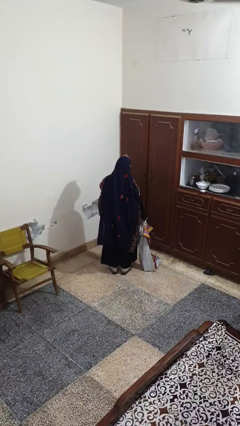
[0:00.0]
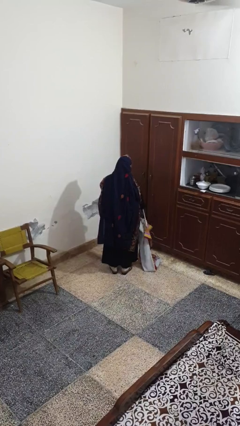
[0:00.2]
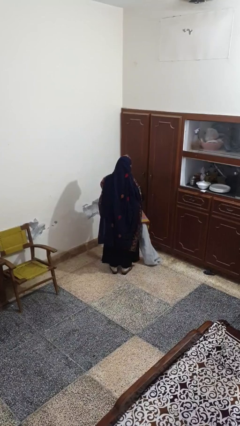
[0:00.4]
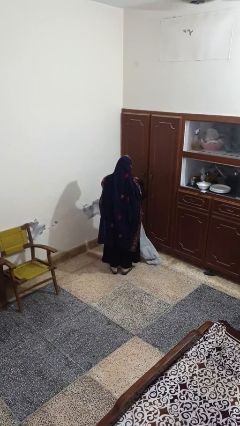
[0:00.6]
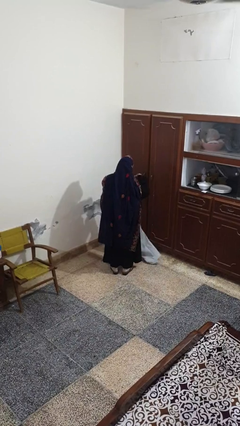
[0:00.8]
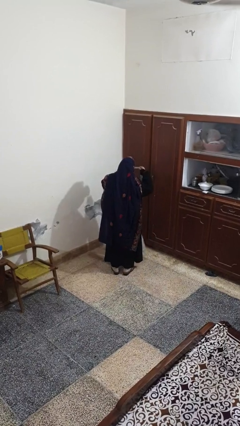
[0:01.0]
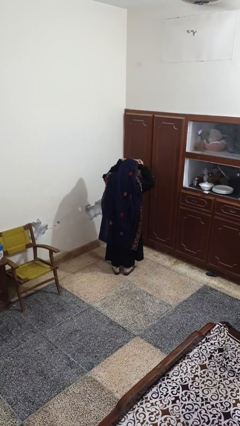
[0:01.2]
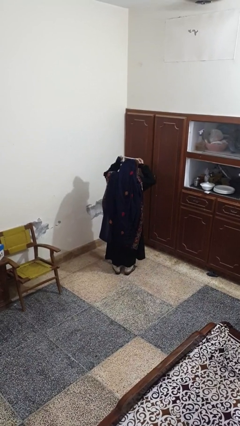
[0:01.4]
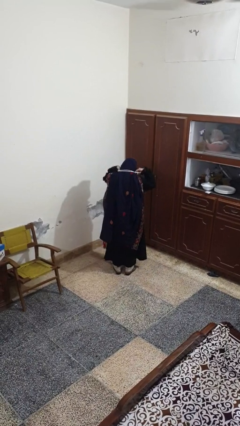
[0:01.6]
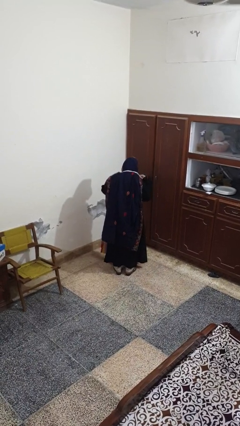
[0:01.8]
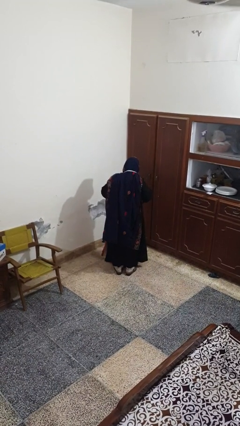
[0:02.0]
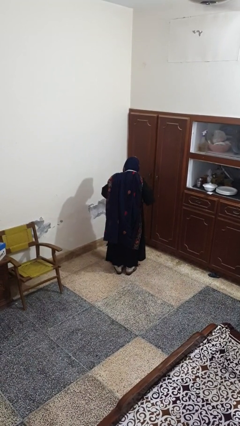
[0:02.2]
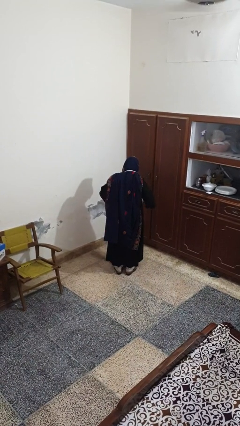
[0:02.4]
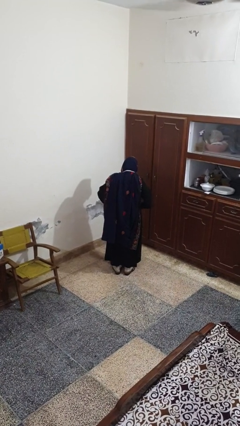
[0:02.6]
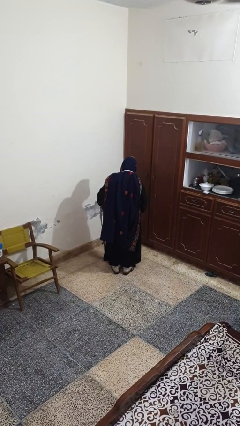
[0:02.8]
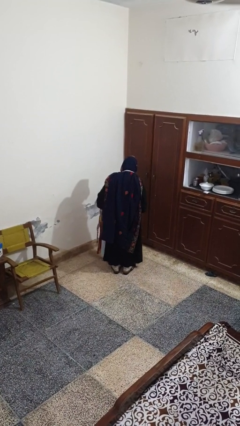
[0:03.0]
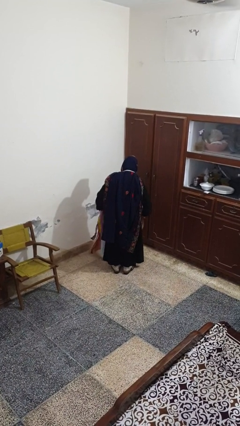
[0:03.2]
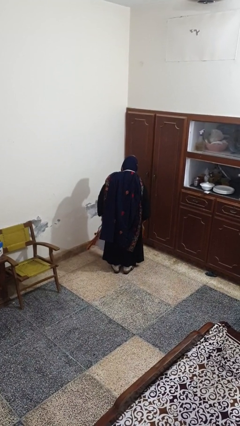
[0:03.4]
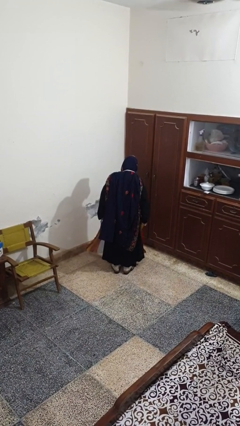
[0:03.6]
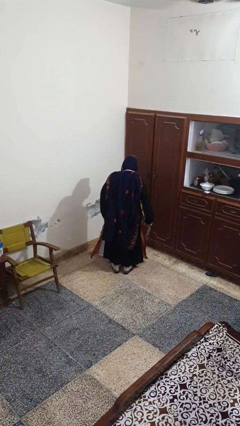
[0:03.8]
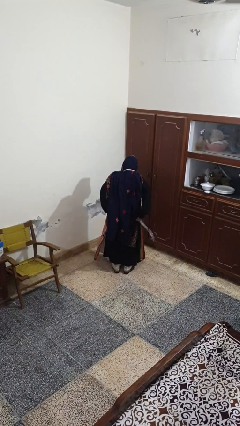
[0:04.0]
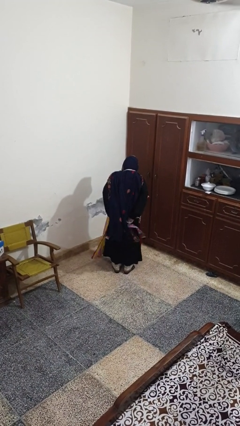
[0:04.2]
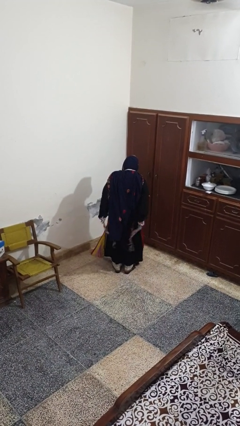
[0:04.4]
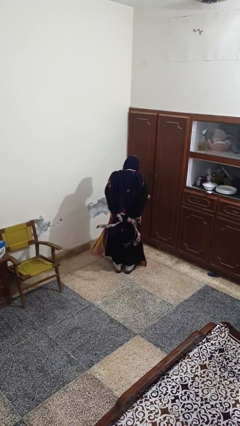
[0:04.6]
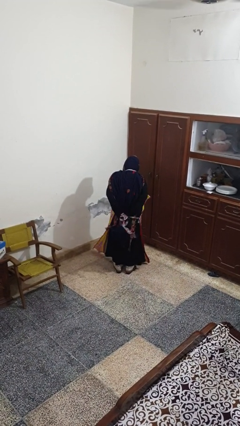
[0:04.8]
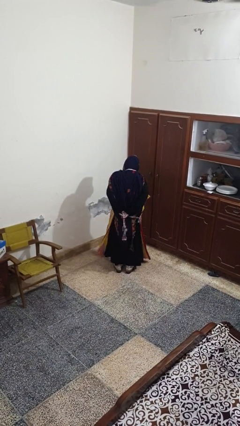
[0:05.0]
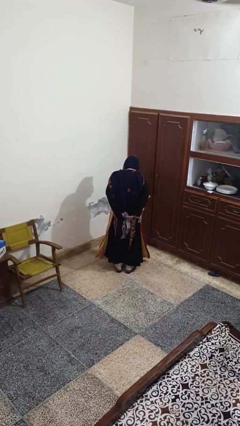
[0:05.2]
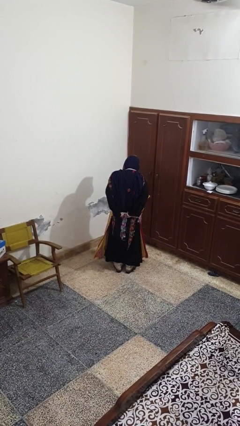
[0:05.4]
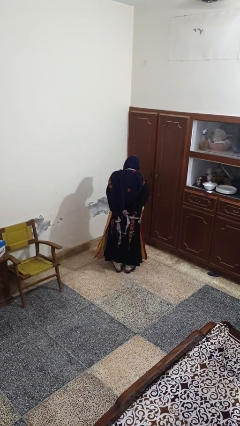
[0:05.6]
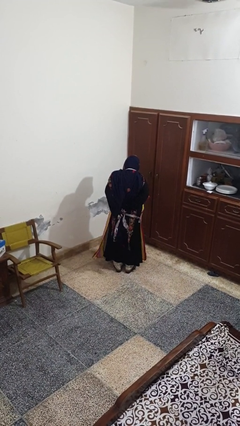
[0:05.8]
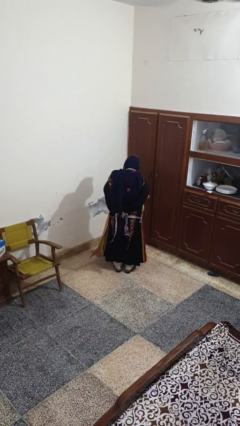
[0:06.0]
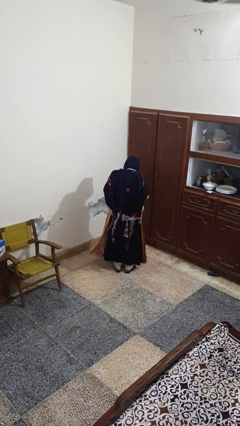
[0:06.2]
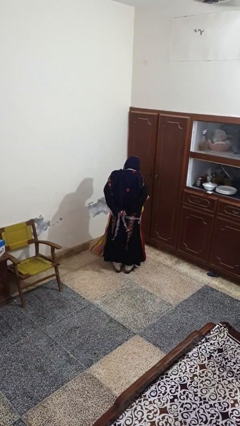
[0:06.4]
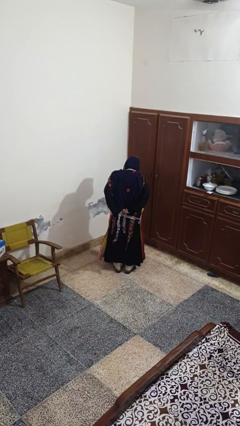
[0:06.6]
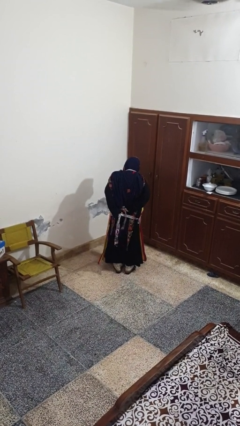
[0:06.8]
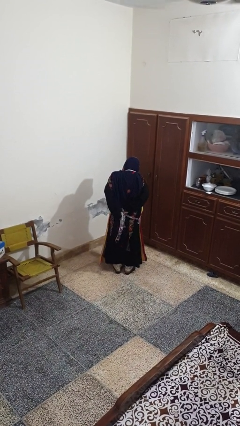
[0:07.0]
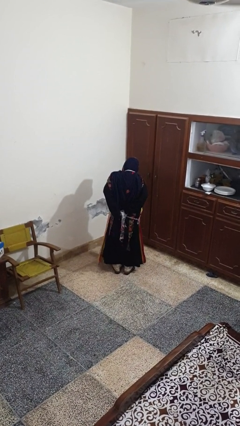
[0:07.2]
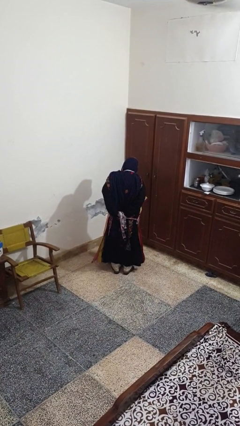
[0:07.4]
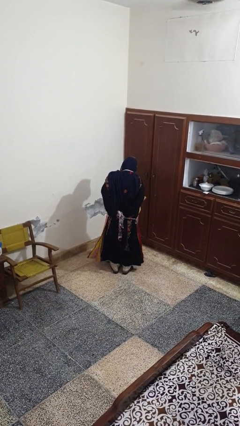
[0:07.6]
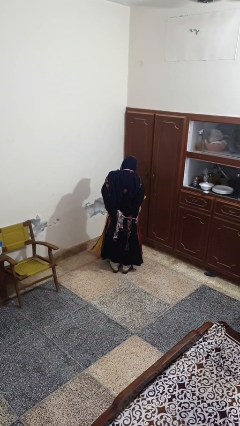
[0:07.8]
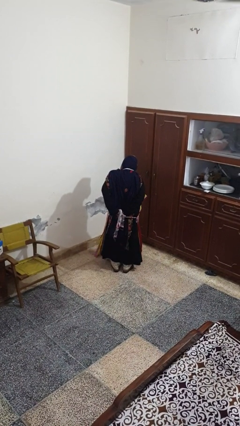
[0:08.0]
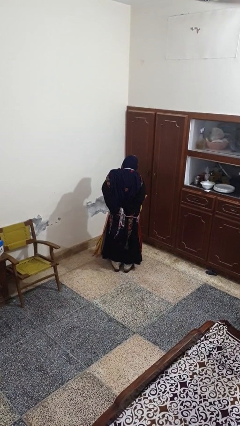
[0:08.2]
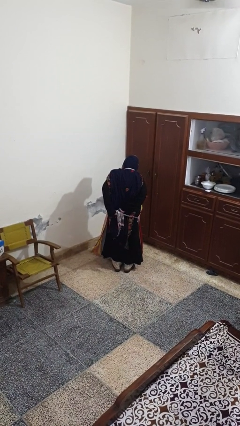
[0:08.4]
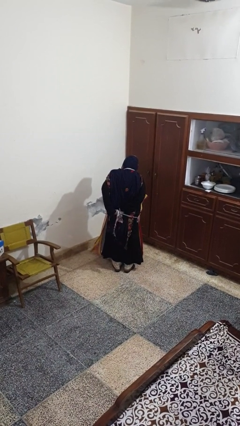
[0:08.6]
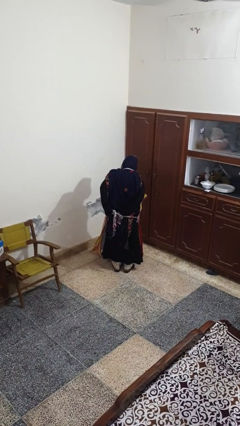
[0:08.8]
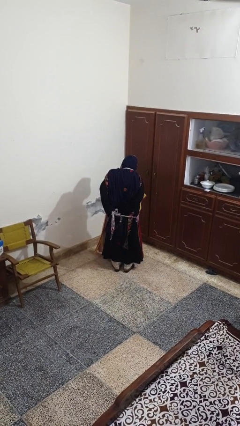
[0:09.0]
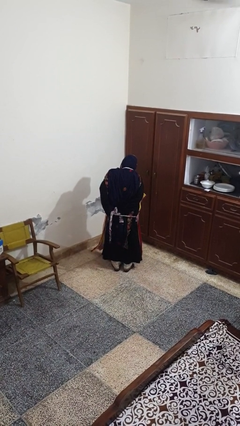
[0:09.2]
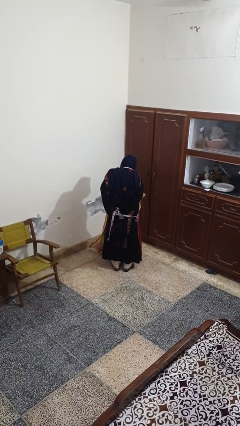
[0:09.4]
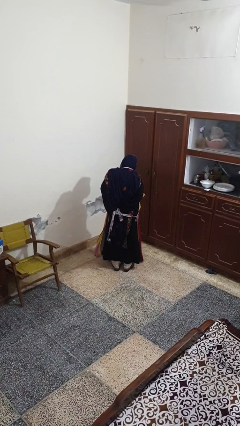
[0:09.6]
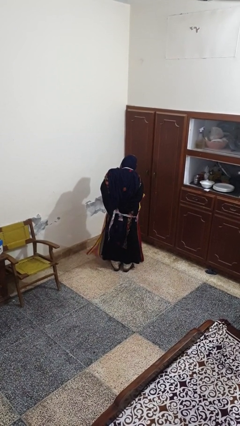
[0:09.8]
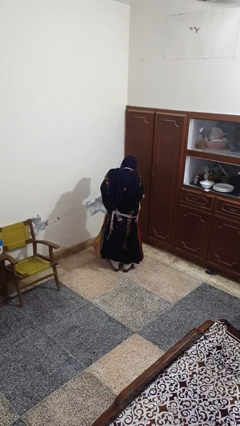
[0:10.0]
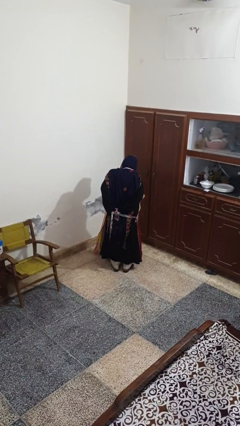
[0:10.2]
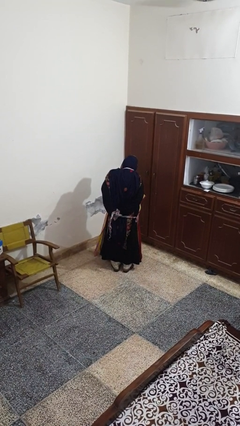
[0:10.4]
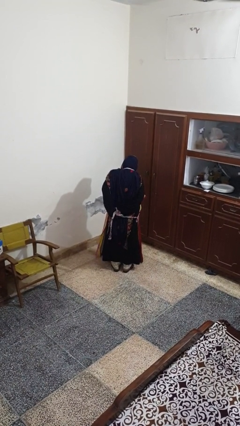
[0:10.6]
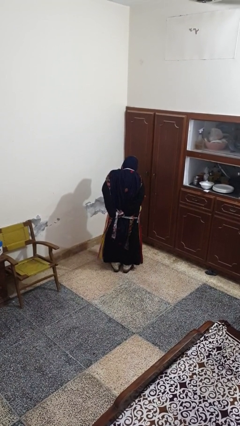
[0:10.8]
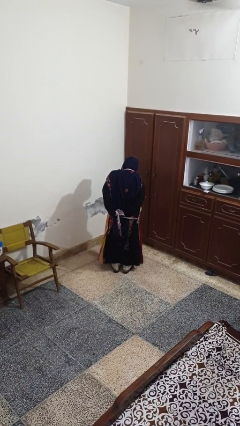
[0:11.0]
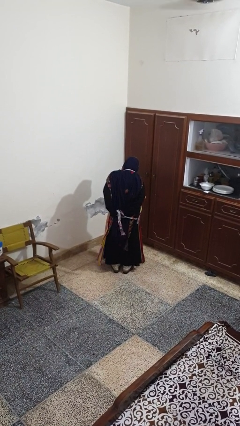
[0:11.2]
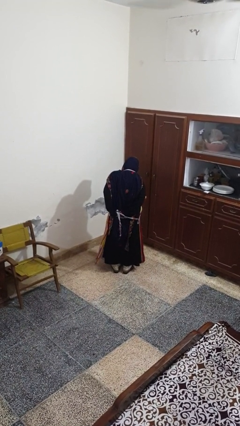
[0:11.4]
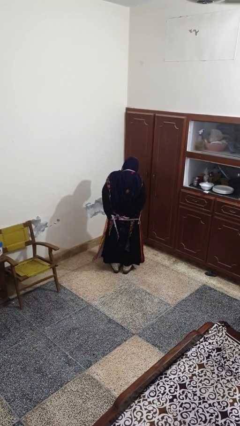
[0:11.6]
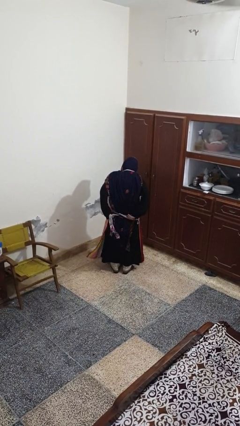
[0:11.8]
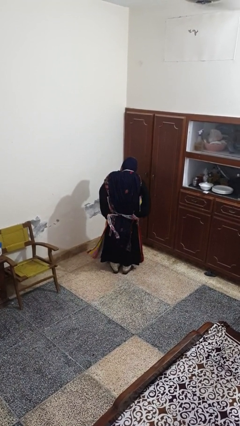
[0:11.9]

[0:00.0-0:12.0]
person puts on apron

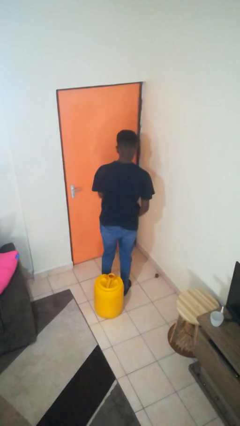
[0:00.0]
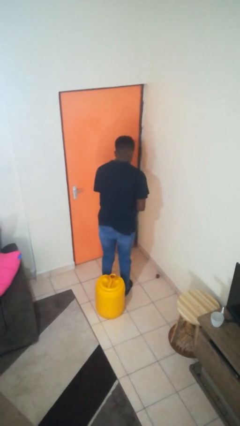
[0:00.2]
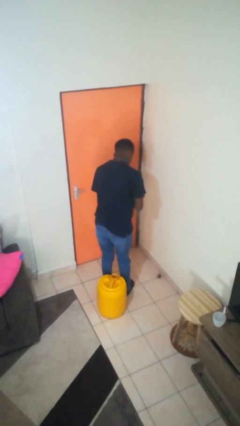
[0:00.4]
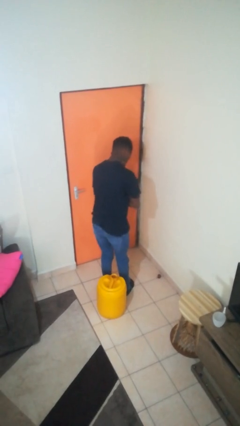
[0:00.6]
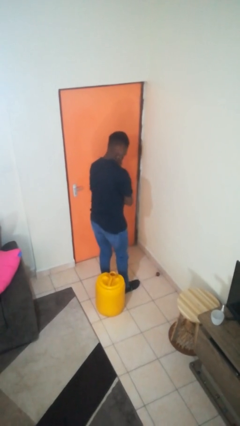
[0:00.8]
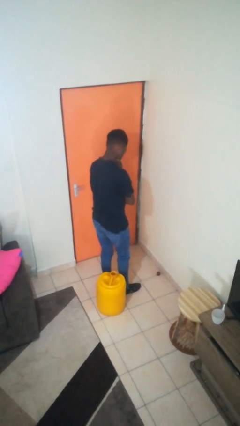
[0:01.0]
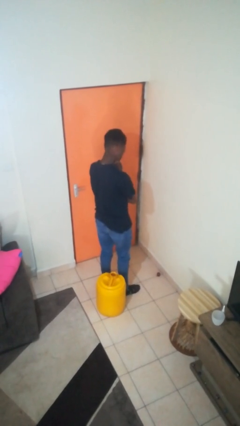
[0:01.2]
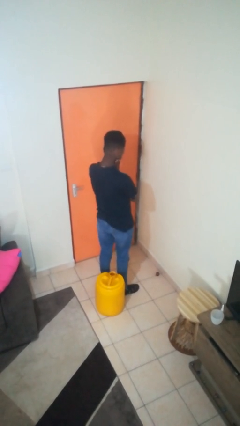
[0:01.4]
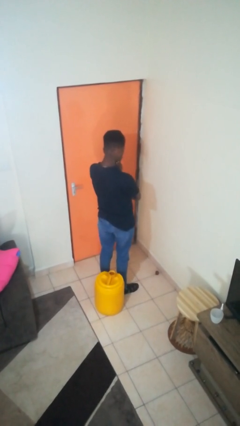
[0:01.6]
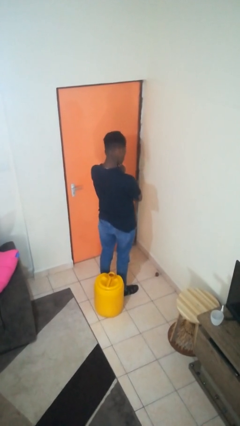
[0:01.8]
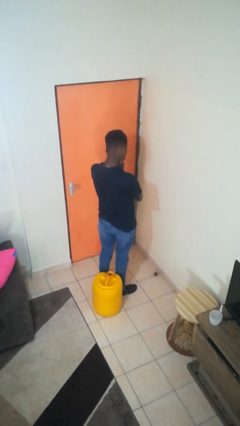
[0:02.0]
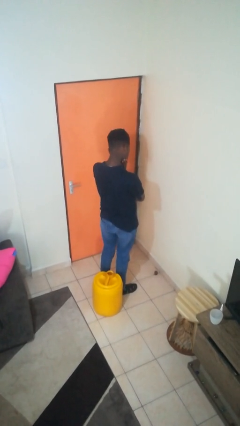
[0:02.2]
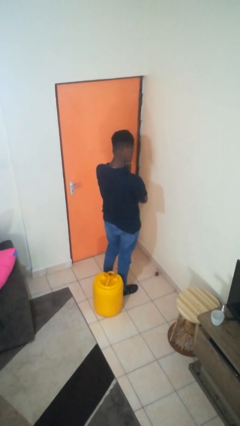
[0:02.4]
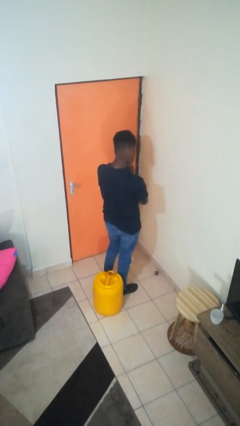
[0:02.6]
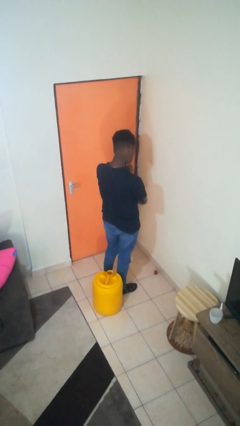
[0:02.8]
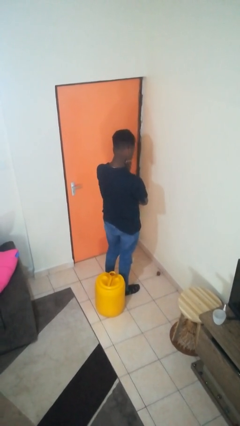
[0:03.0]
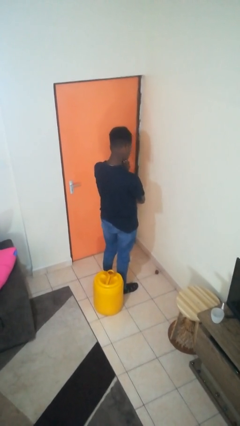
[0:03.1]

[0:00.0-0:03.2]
person strokes chin

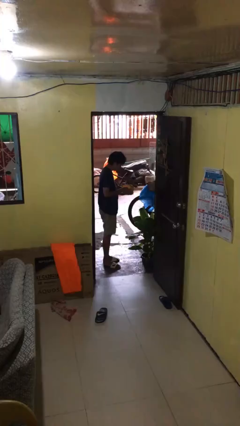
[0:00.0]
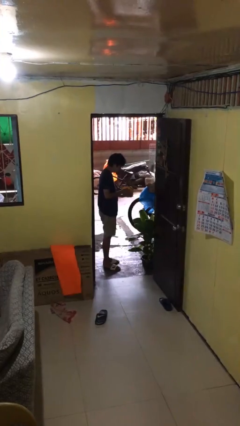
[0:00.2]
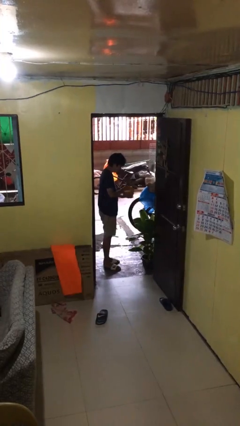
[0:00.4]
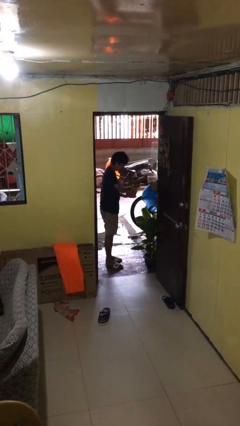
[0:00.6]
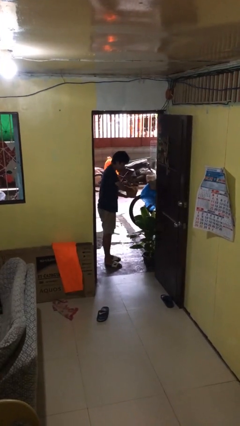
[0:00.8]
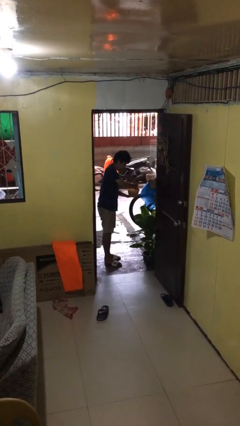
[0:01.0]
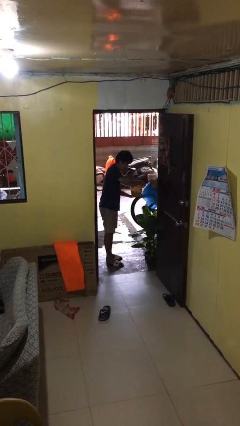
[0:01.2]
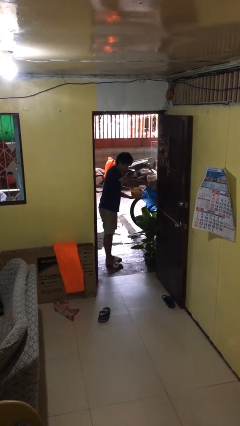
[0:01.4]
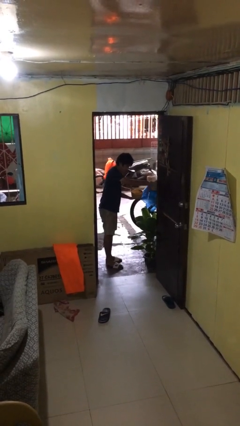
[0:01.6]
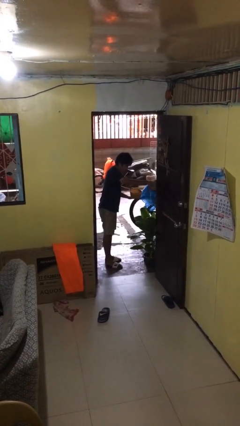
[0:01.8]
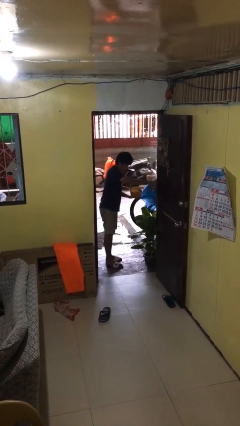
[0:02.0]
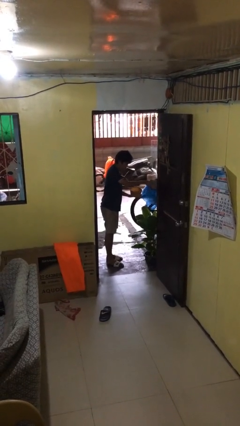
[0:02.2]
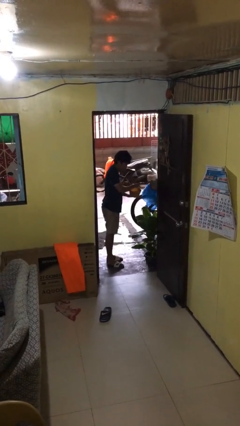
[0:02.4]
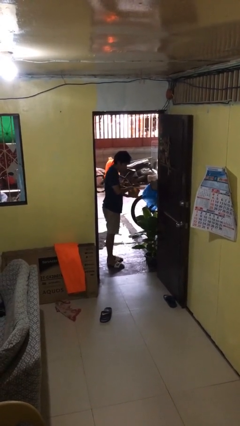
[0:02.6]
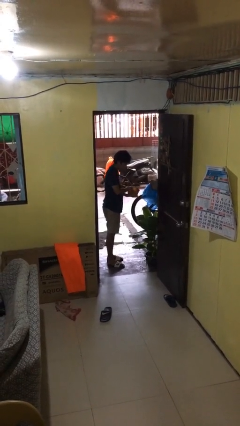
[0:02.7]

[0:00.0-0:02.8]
person waters houseplant
